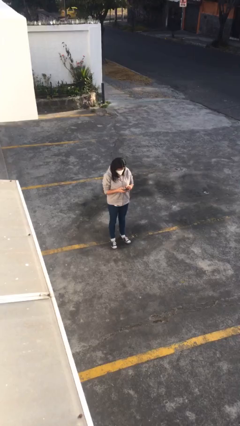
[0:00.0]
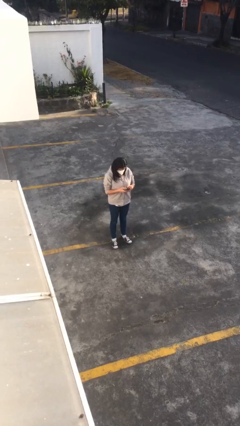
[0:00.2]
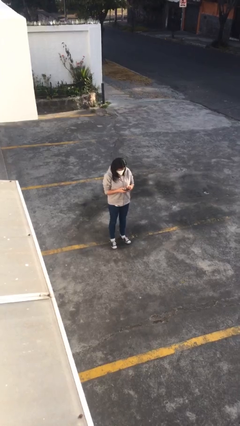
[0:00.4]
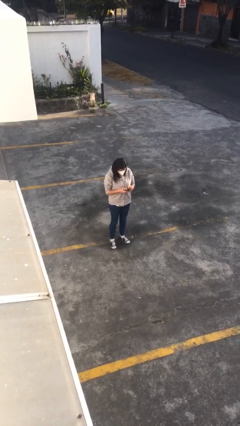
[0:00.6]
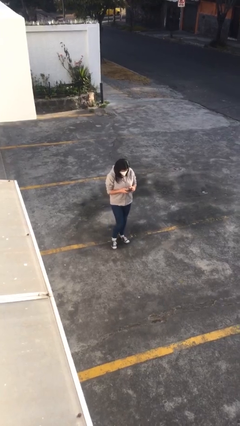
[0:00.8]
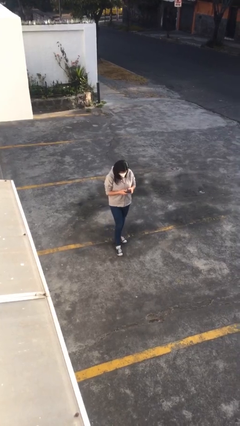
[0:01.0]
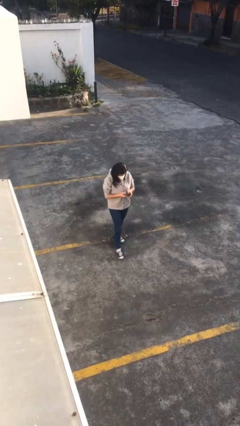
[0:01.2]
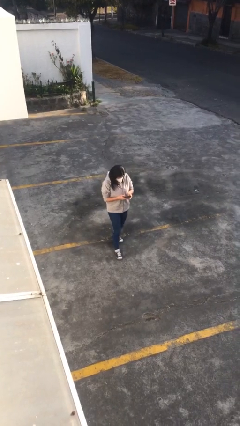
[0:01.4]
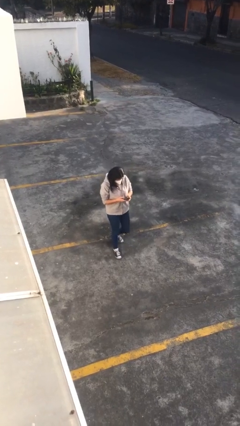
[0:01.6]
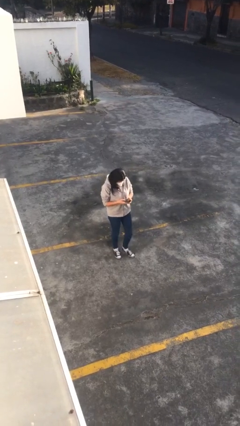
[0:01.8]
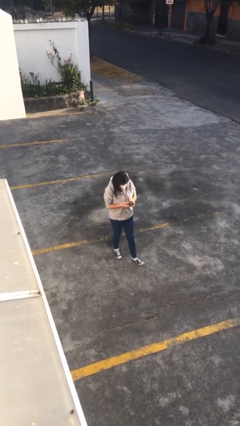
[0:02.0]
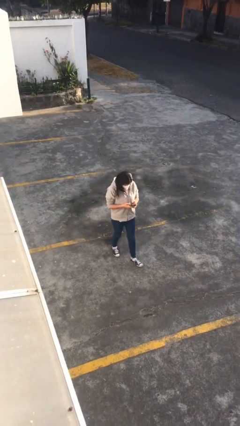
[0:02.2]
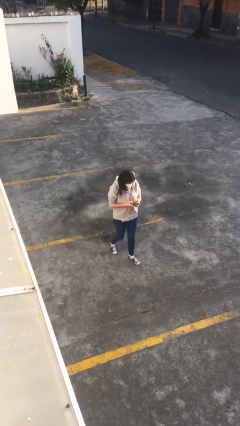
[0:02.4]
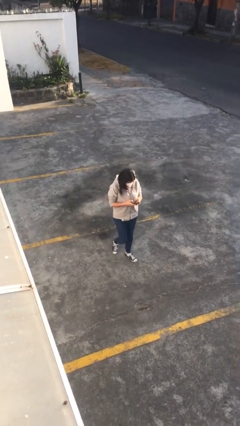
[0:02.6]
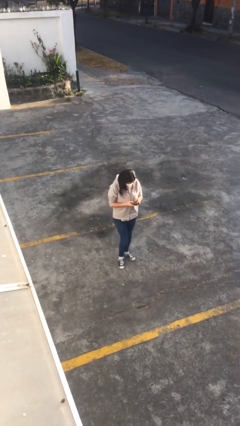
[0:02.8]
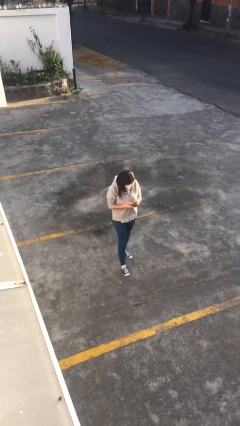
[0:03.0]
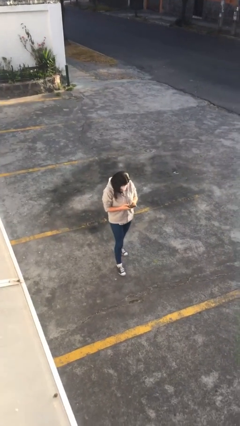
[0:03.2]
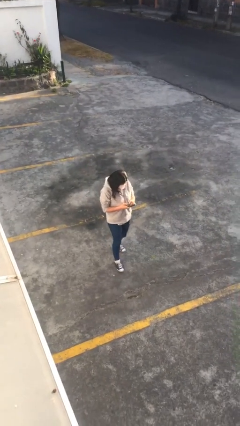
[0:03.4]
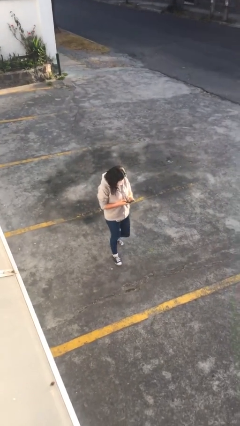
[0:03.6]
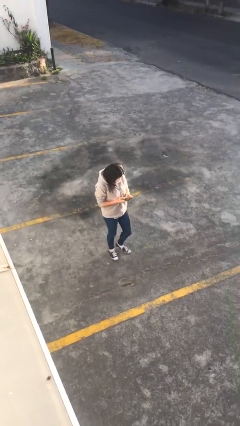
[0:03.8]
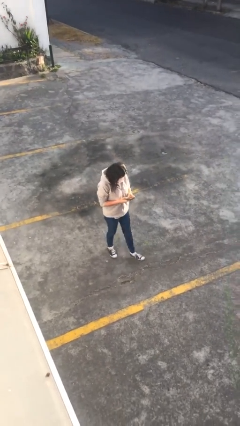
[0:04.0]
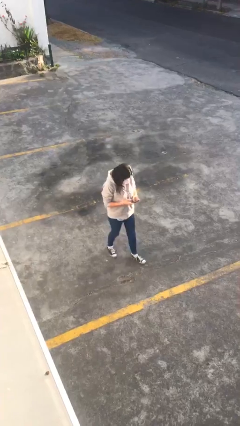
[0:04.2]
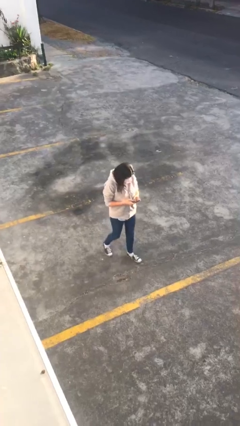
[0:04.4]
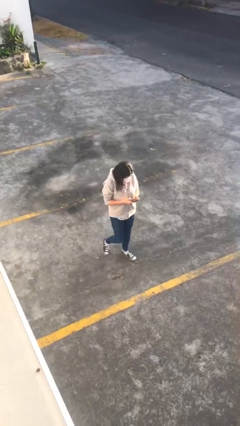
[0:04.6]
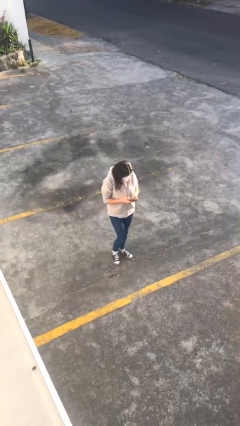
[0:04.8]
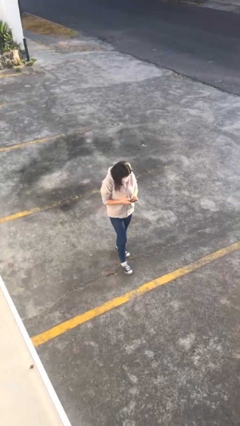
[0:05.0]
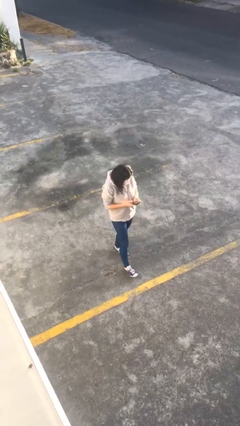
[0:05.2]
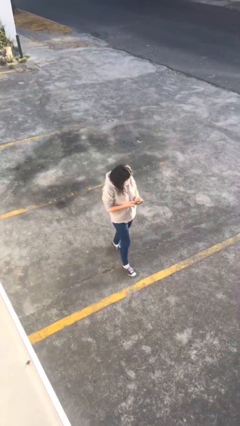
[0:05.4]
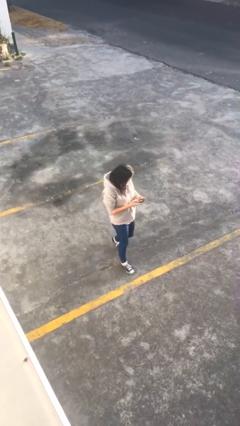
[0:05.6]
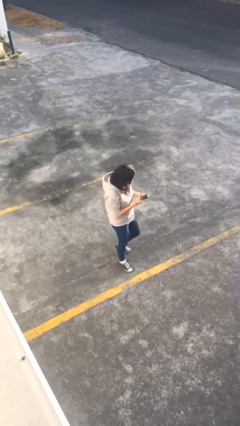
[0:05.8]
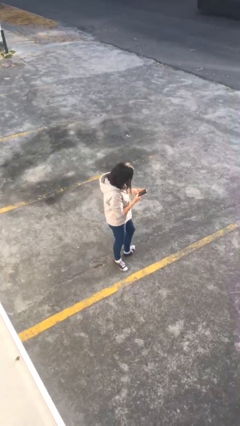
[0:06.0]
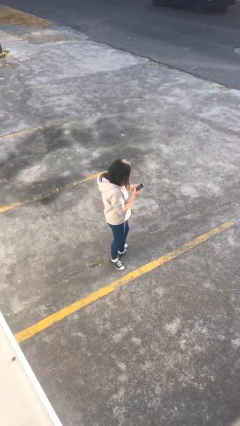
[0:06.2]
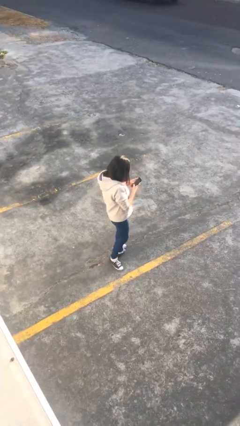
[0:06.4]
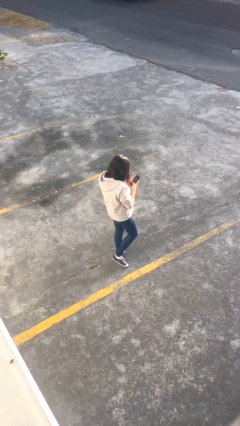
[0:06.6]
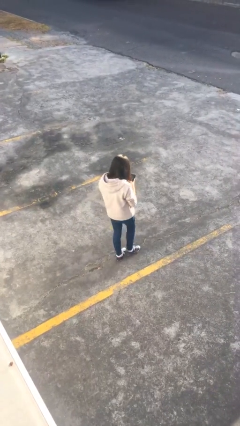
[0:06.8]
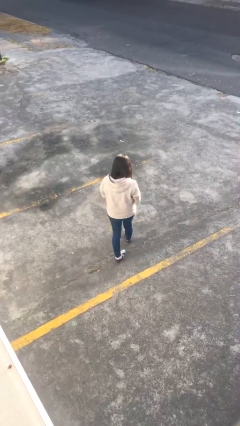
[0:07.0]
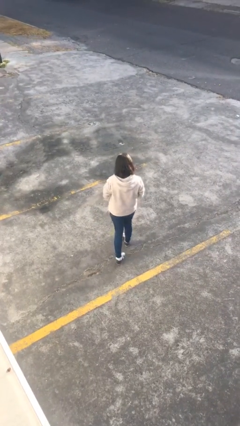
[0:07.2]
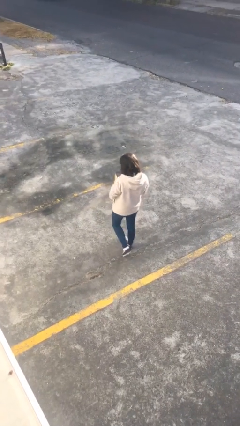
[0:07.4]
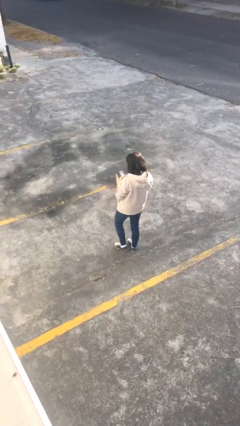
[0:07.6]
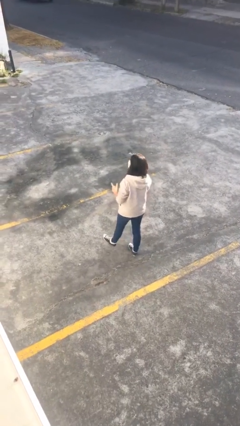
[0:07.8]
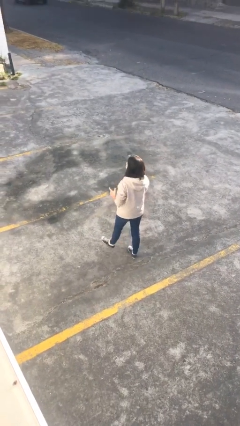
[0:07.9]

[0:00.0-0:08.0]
person texts on phone

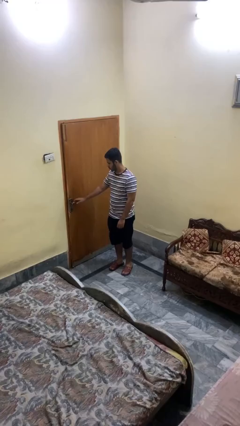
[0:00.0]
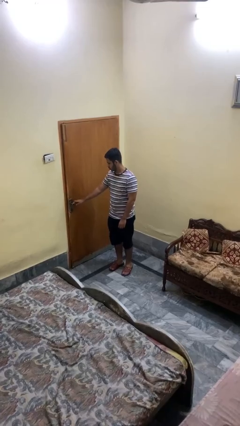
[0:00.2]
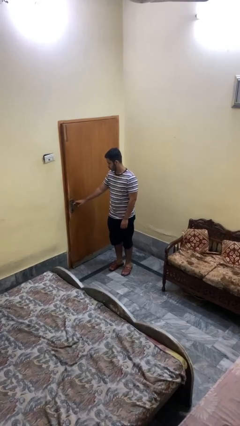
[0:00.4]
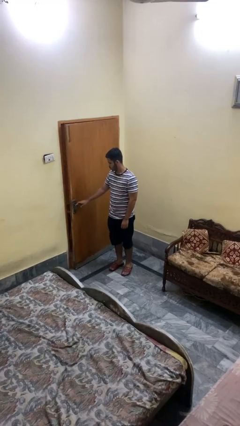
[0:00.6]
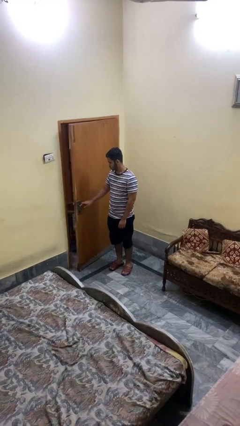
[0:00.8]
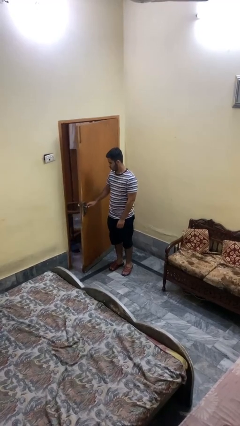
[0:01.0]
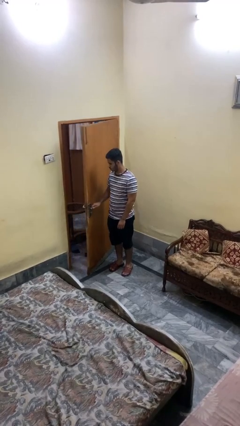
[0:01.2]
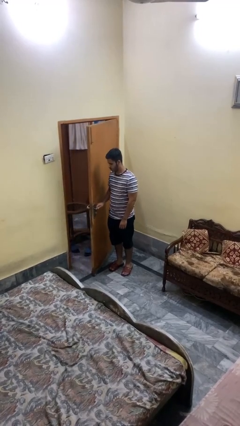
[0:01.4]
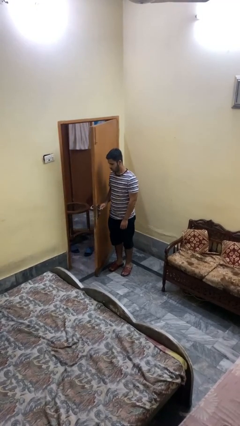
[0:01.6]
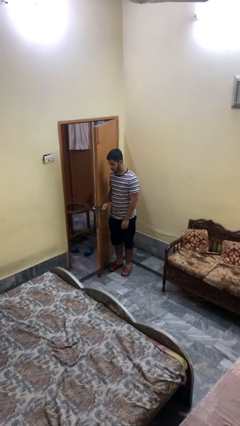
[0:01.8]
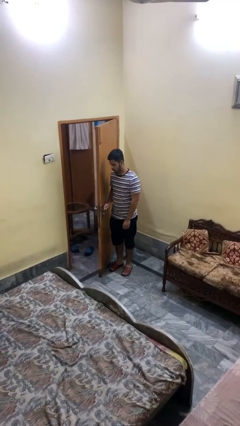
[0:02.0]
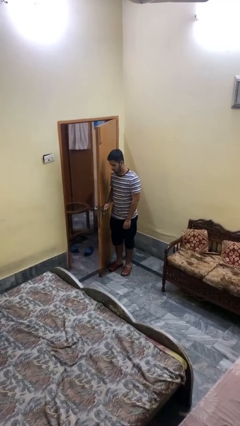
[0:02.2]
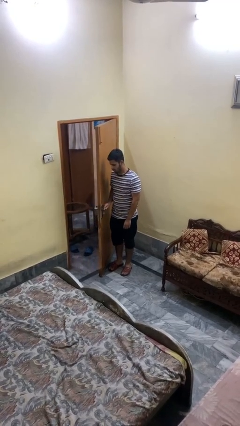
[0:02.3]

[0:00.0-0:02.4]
person opens facility door

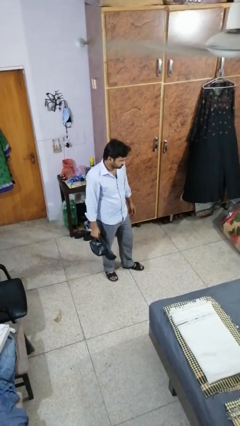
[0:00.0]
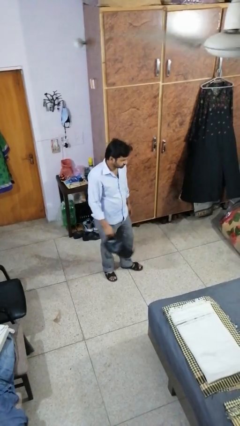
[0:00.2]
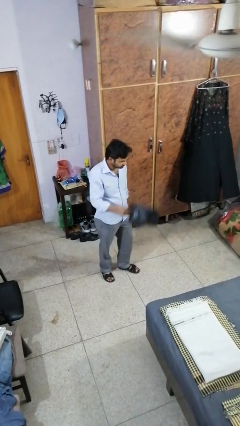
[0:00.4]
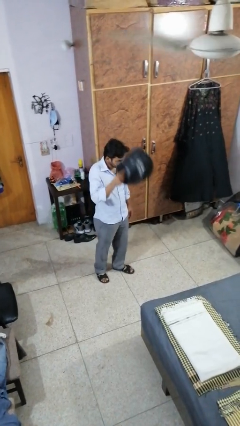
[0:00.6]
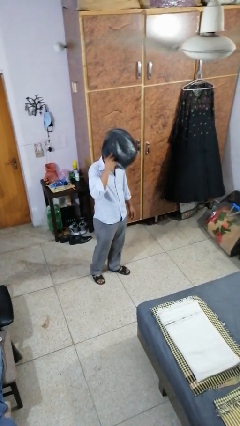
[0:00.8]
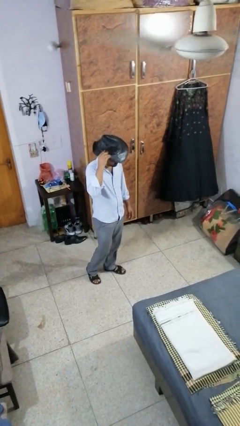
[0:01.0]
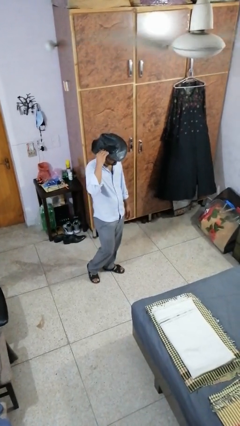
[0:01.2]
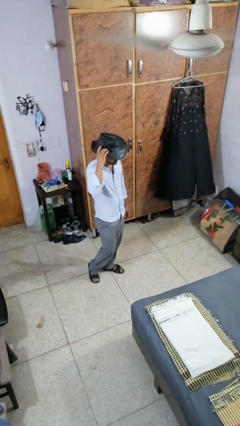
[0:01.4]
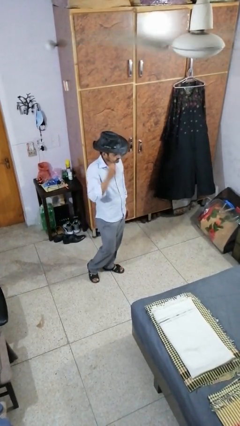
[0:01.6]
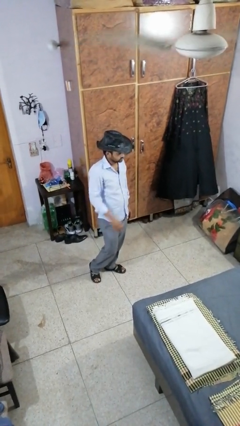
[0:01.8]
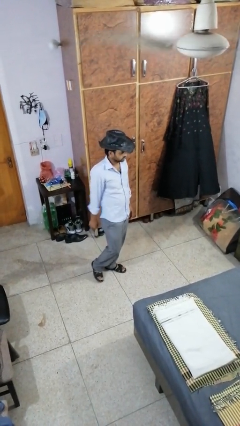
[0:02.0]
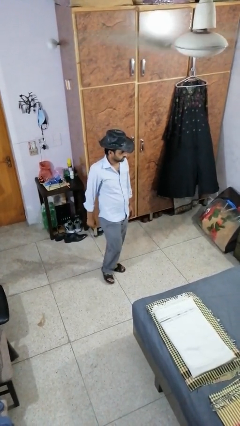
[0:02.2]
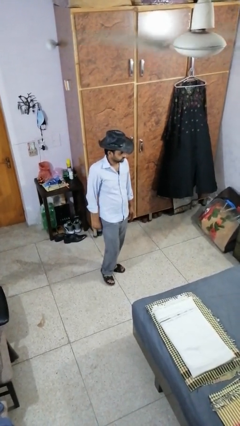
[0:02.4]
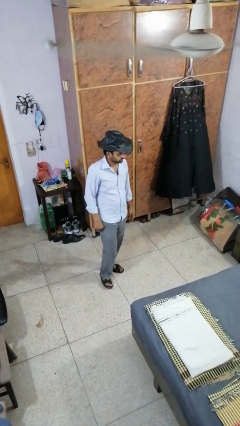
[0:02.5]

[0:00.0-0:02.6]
person puts on hat

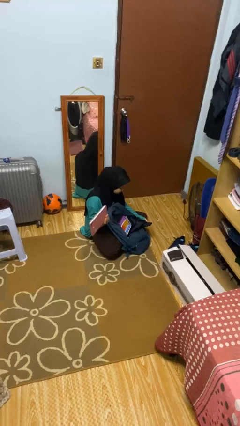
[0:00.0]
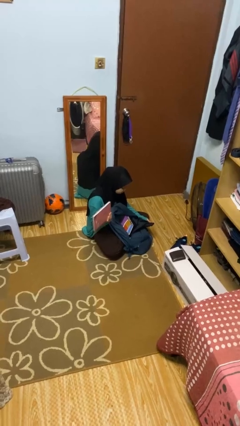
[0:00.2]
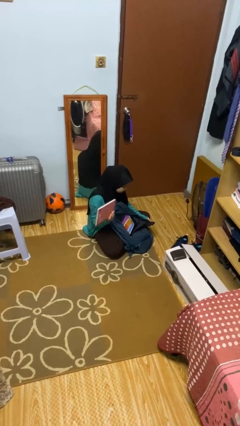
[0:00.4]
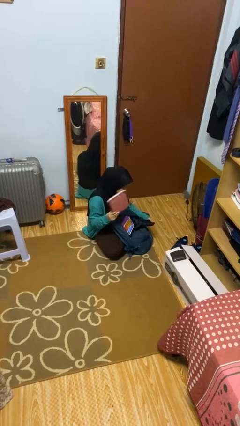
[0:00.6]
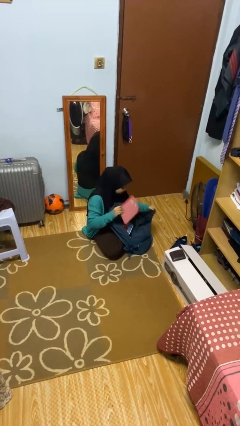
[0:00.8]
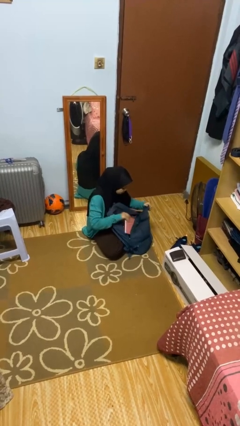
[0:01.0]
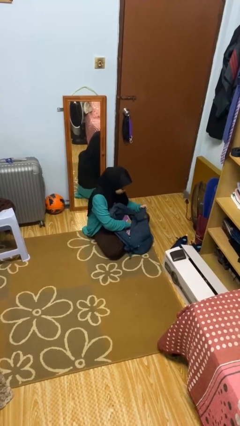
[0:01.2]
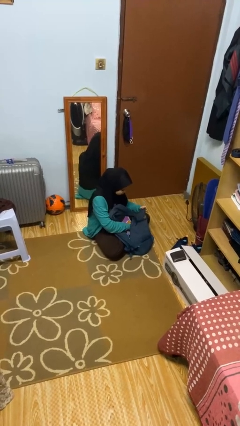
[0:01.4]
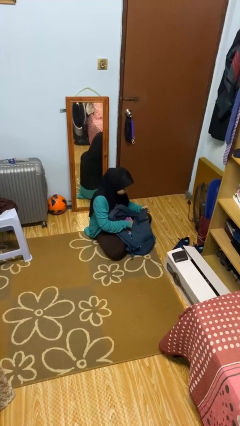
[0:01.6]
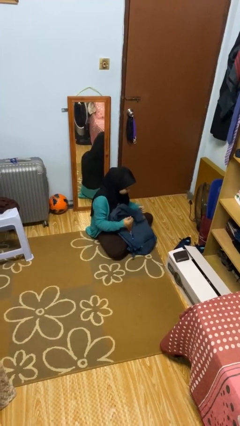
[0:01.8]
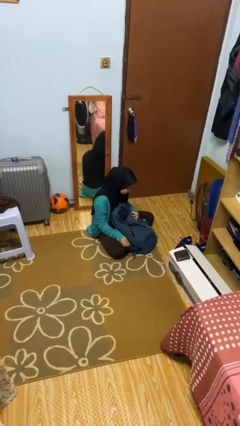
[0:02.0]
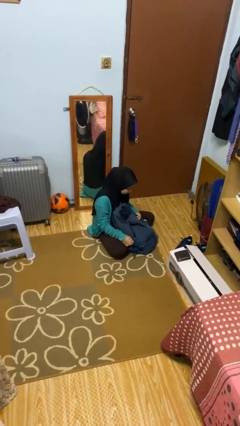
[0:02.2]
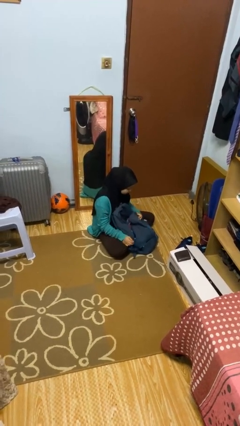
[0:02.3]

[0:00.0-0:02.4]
person puts object into backpack

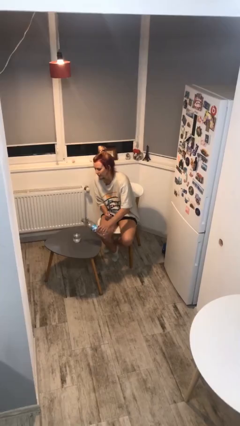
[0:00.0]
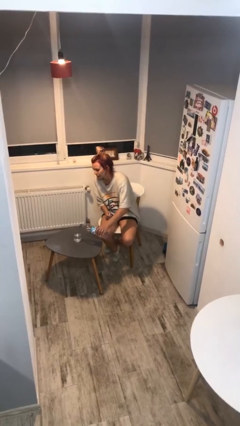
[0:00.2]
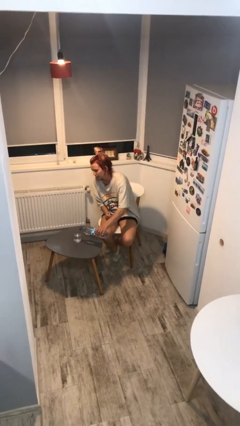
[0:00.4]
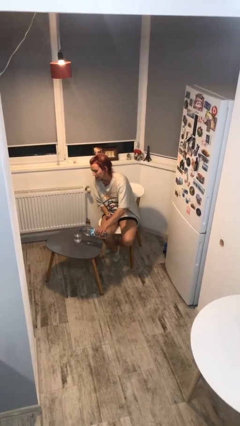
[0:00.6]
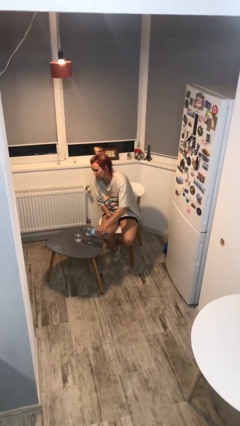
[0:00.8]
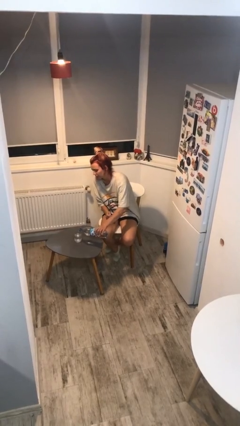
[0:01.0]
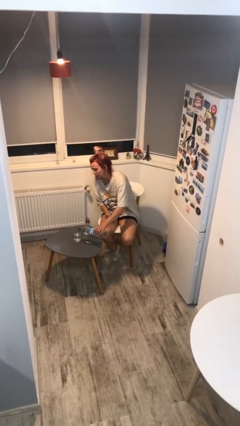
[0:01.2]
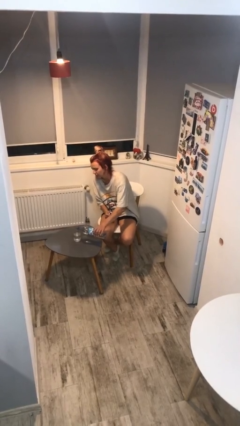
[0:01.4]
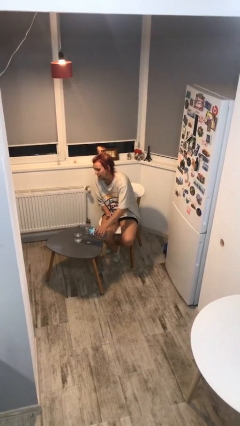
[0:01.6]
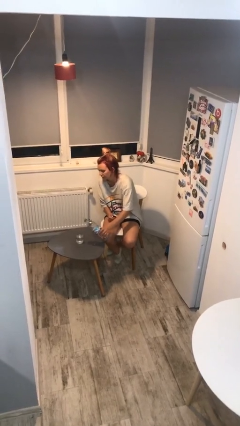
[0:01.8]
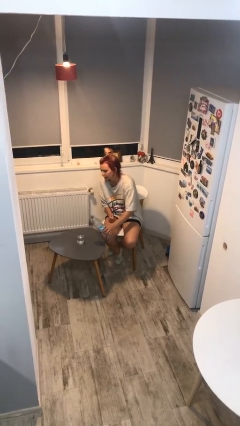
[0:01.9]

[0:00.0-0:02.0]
person pours liquid into cup

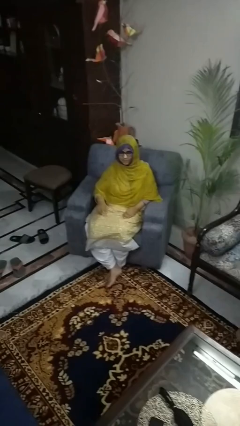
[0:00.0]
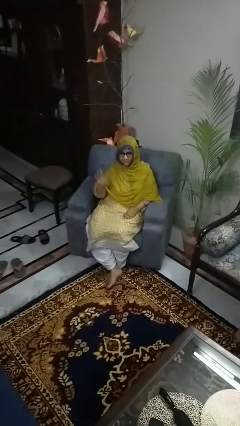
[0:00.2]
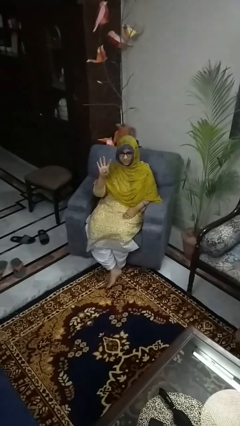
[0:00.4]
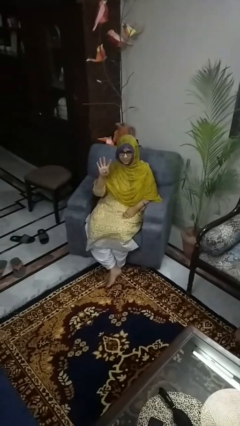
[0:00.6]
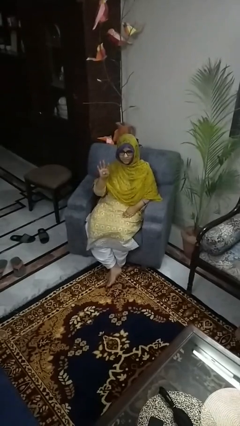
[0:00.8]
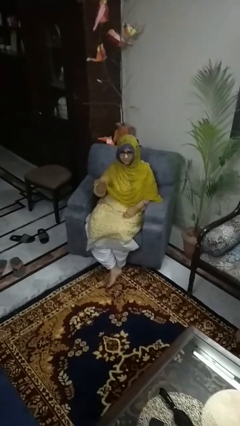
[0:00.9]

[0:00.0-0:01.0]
person gestures number four
